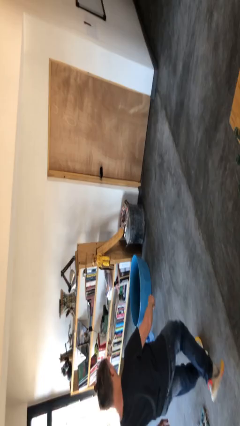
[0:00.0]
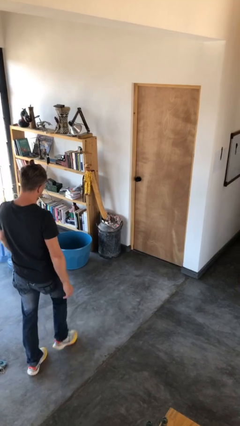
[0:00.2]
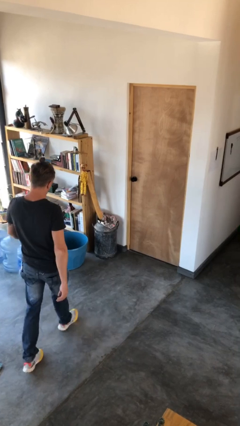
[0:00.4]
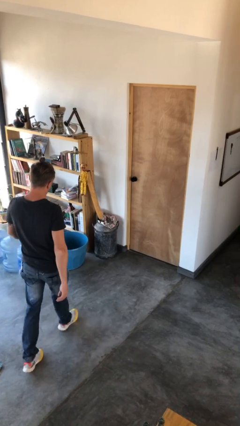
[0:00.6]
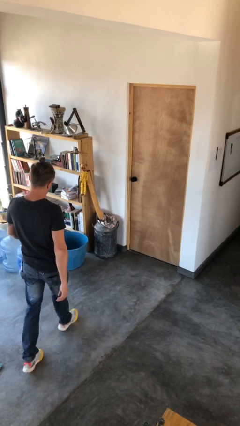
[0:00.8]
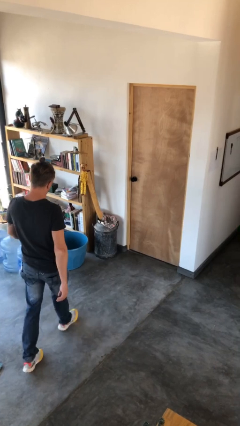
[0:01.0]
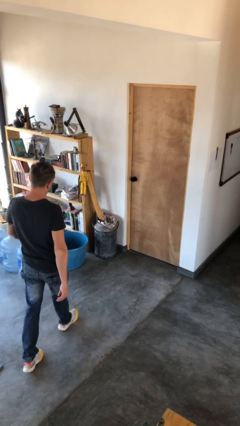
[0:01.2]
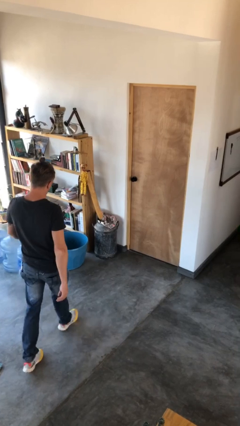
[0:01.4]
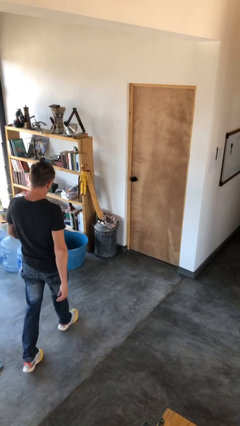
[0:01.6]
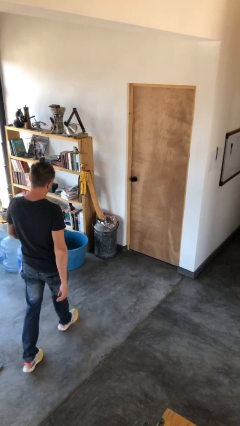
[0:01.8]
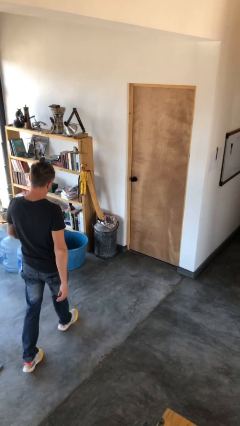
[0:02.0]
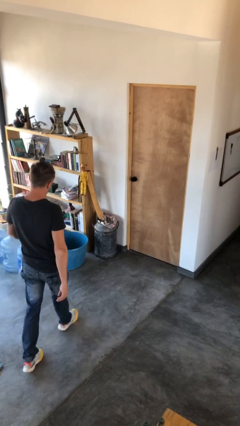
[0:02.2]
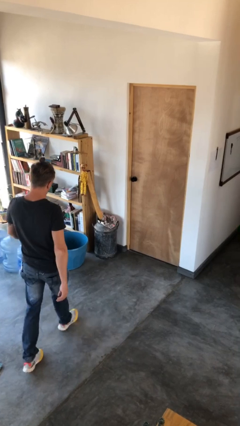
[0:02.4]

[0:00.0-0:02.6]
person closes facility door

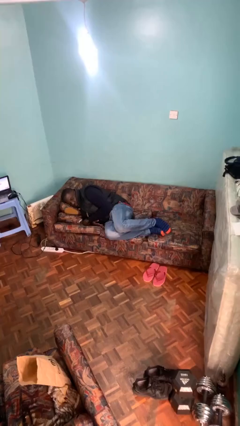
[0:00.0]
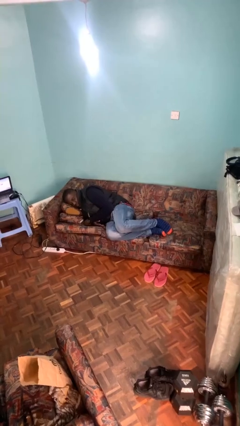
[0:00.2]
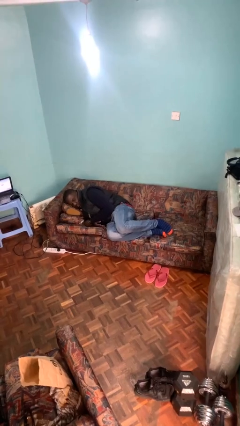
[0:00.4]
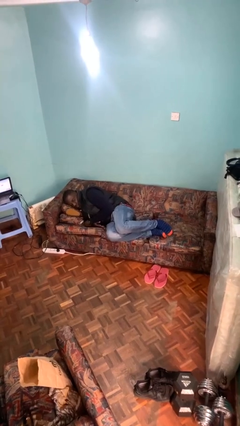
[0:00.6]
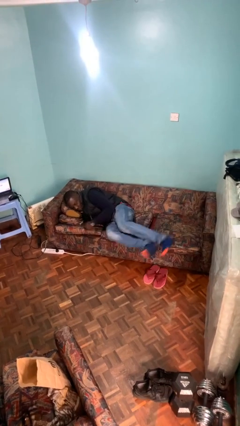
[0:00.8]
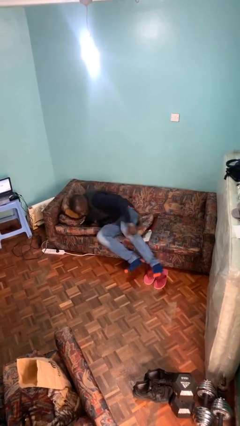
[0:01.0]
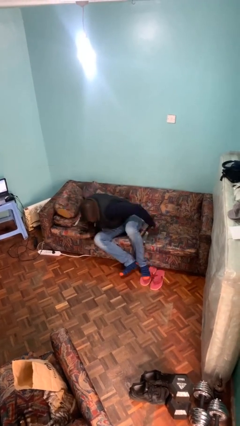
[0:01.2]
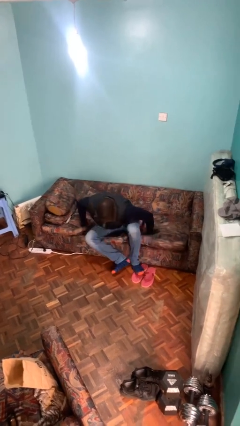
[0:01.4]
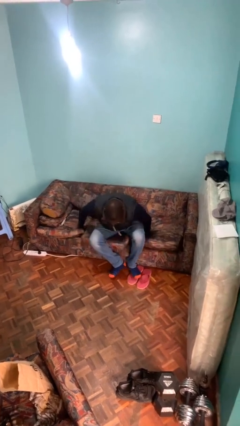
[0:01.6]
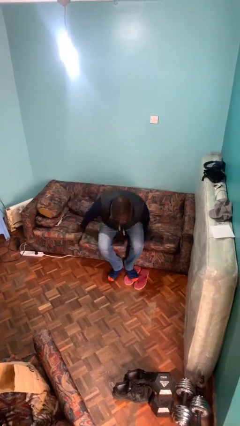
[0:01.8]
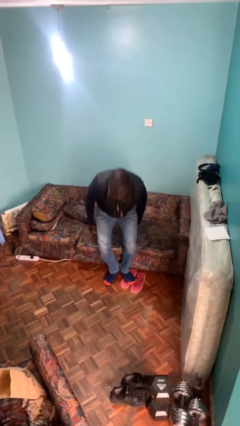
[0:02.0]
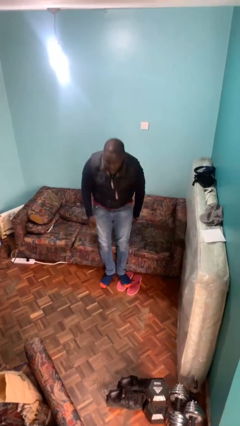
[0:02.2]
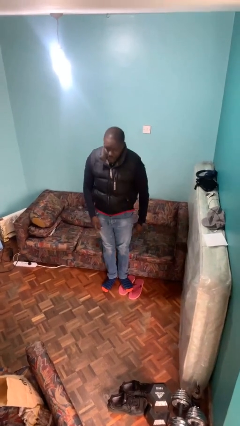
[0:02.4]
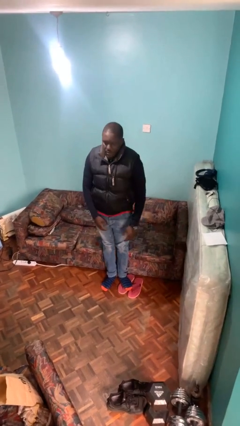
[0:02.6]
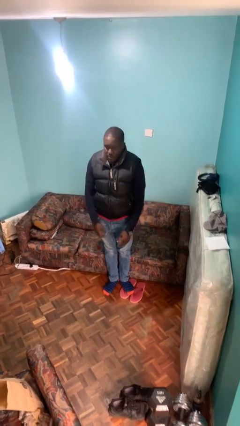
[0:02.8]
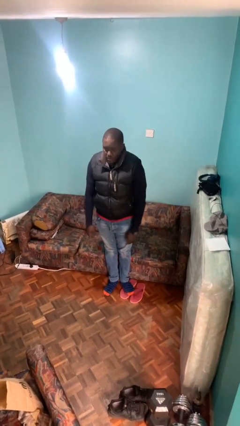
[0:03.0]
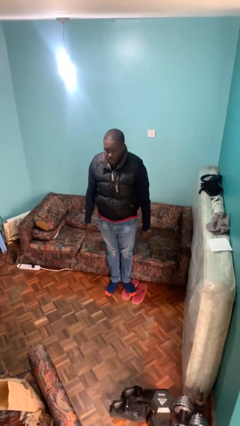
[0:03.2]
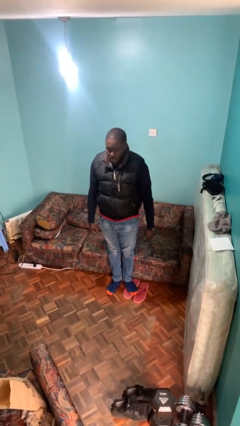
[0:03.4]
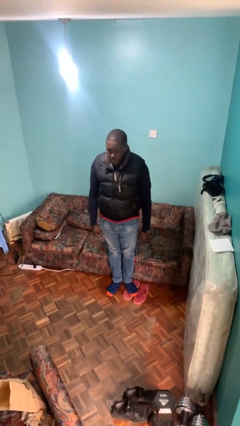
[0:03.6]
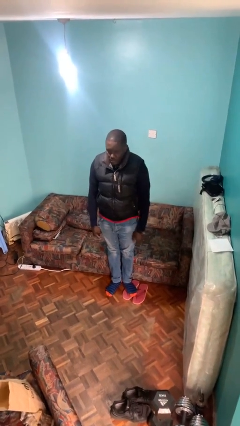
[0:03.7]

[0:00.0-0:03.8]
person stands up

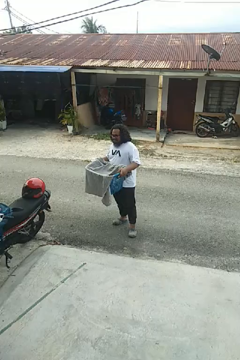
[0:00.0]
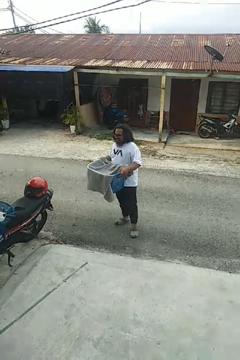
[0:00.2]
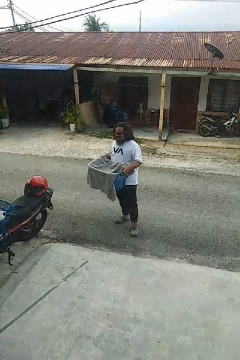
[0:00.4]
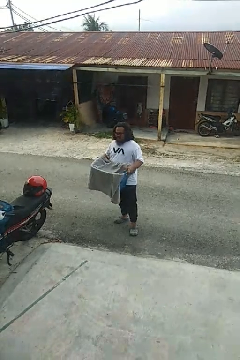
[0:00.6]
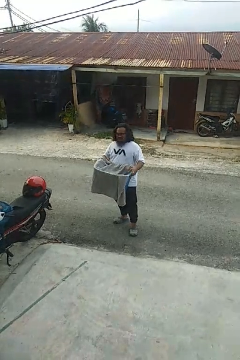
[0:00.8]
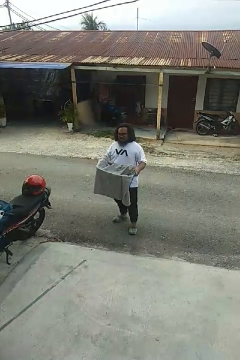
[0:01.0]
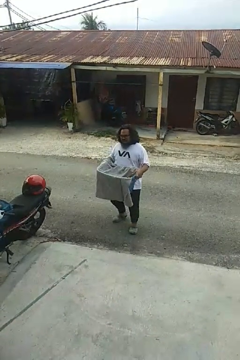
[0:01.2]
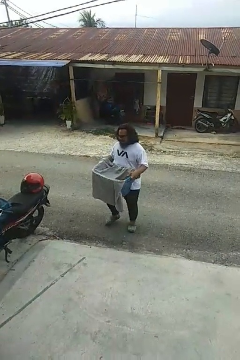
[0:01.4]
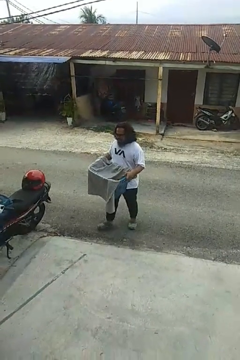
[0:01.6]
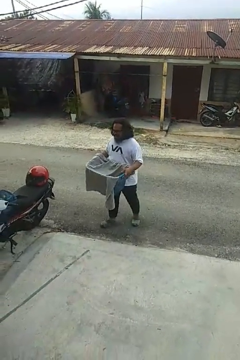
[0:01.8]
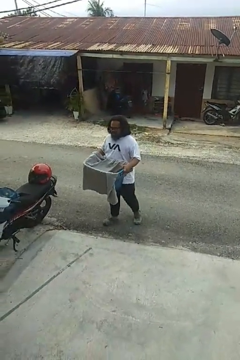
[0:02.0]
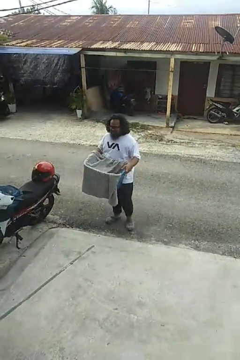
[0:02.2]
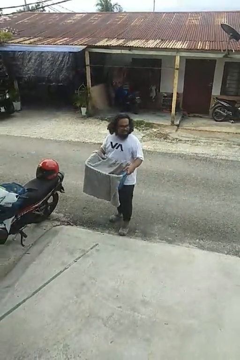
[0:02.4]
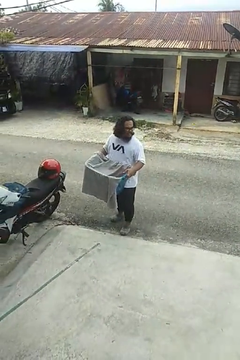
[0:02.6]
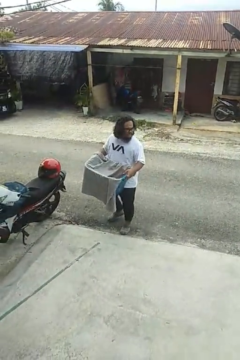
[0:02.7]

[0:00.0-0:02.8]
person carries laundry basket

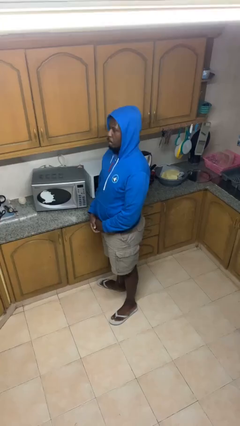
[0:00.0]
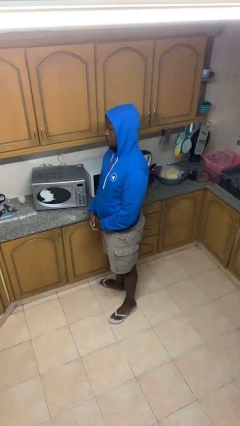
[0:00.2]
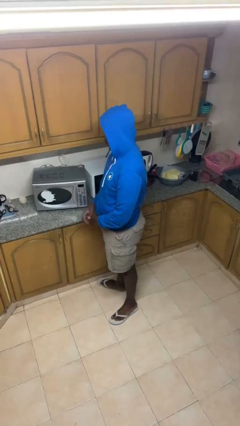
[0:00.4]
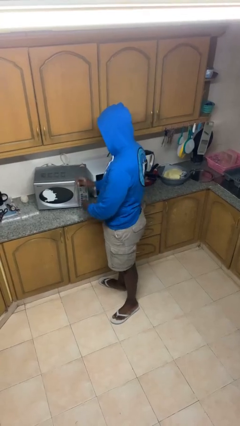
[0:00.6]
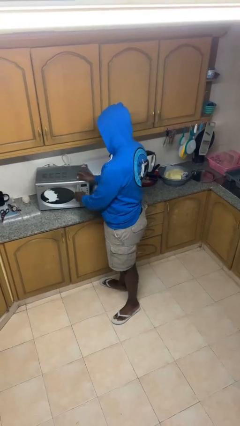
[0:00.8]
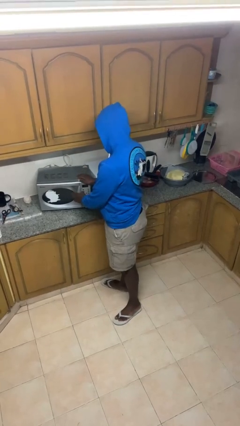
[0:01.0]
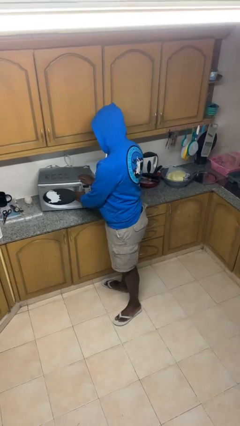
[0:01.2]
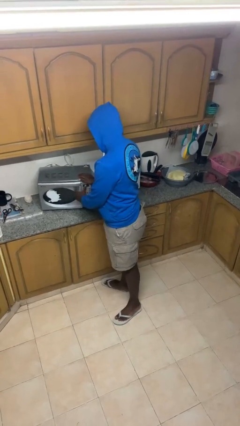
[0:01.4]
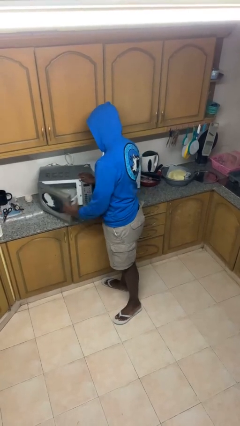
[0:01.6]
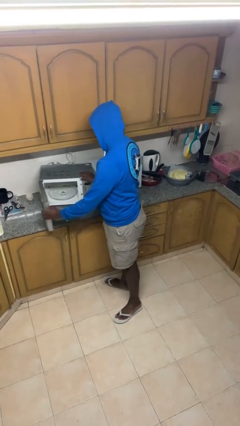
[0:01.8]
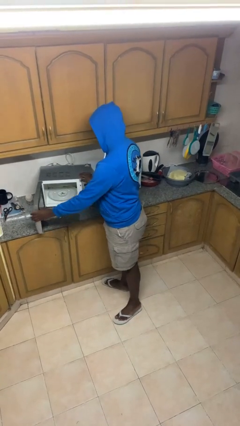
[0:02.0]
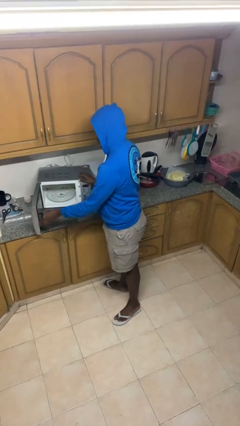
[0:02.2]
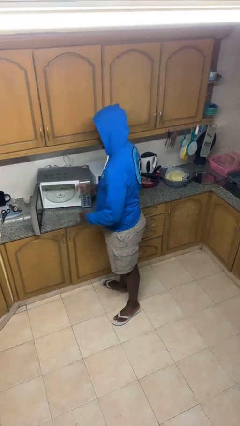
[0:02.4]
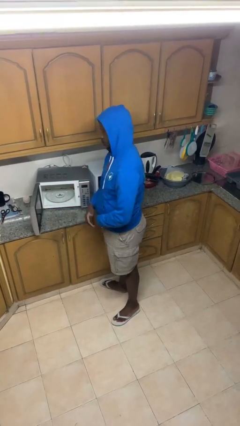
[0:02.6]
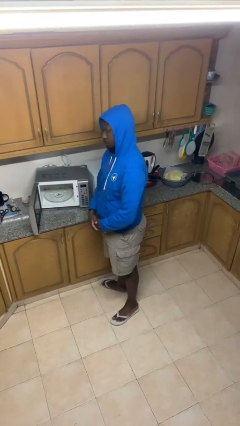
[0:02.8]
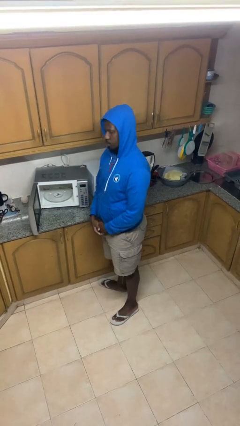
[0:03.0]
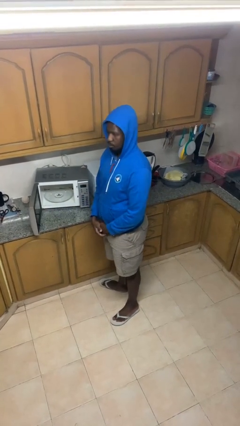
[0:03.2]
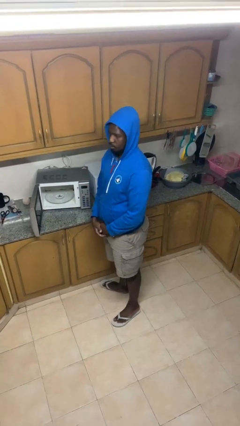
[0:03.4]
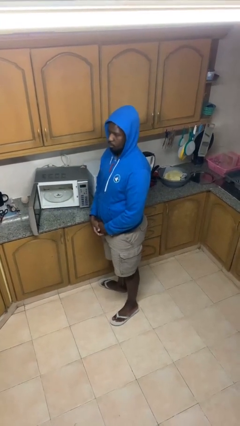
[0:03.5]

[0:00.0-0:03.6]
person opens microwave

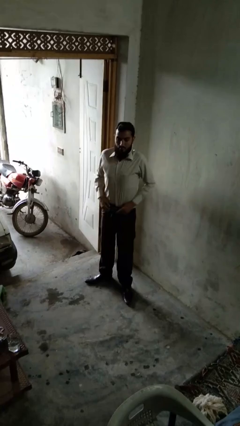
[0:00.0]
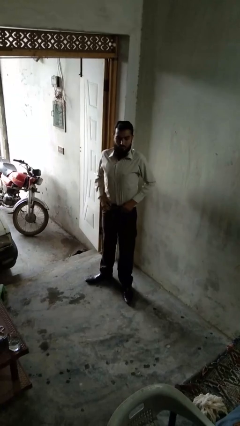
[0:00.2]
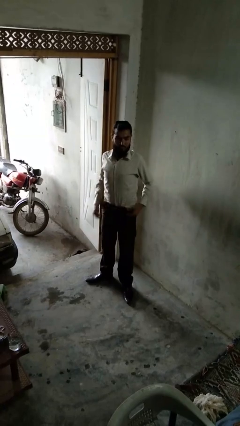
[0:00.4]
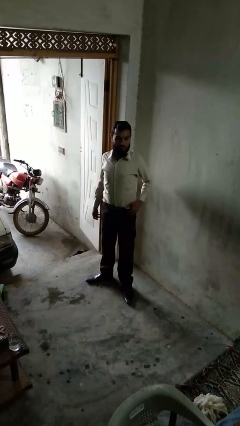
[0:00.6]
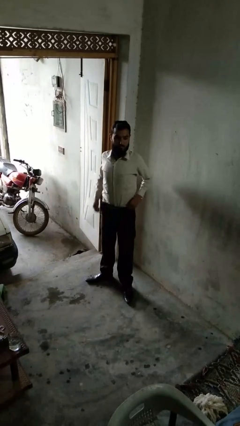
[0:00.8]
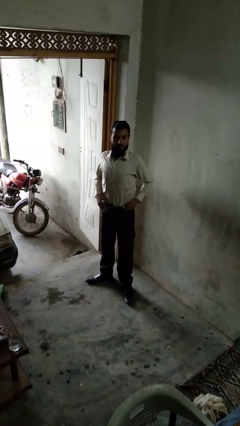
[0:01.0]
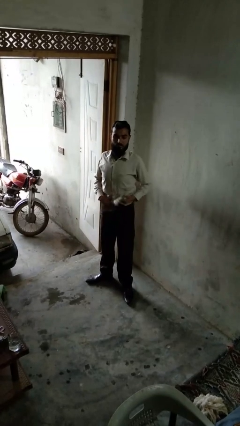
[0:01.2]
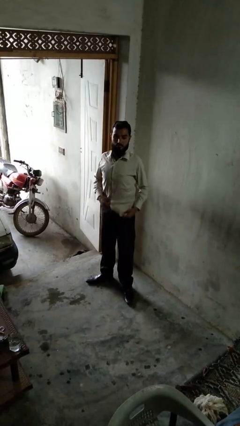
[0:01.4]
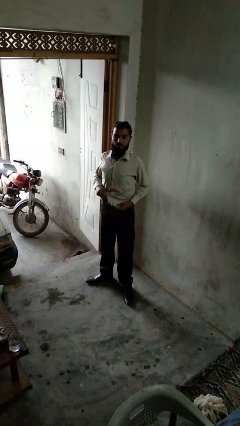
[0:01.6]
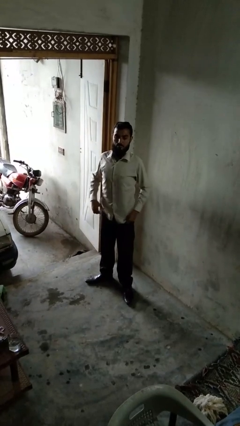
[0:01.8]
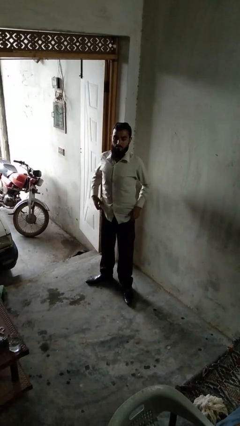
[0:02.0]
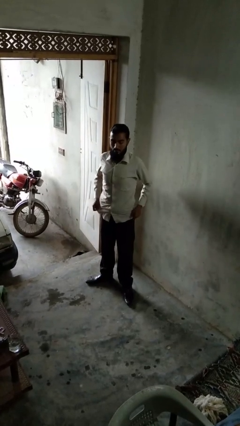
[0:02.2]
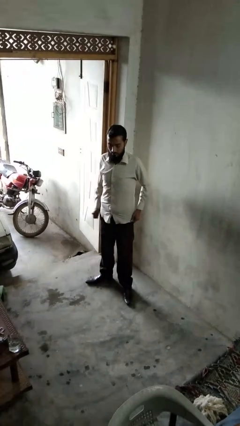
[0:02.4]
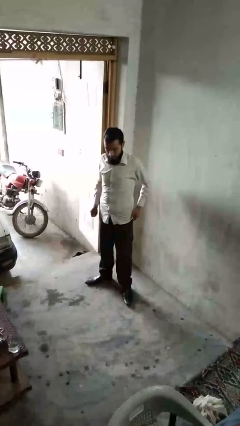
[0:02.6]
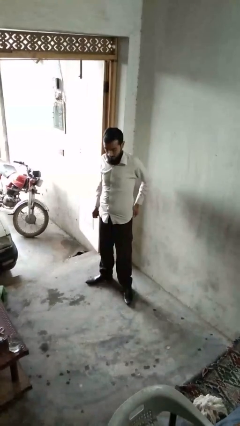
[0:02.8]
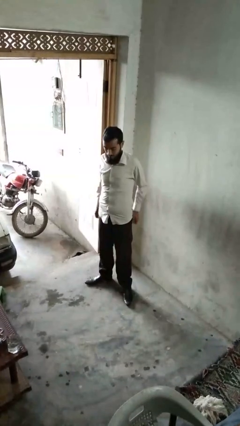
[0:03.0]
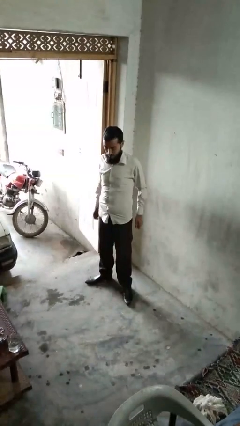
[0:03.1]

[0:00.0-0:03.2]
person untucks shirt

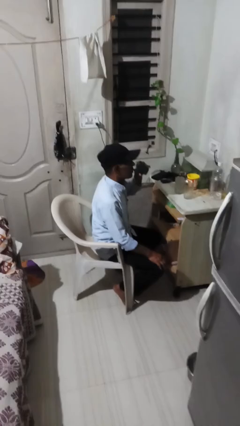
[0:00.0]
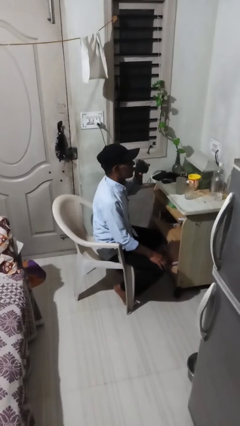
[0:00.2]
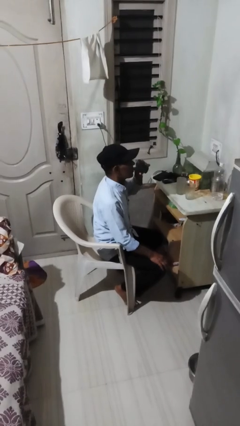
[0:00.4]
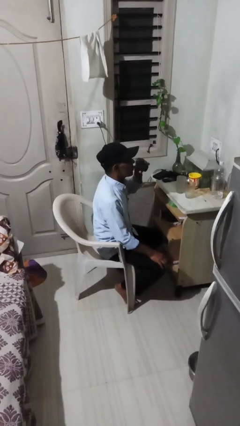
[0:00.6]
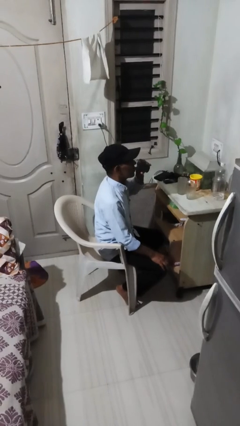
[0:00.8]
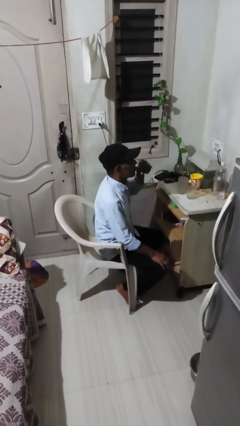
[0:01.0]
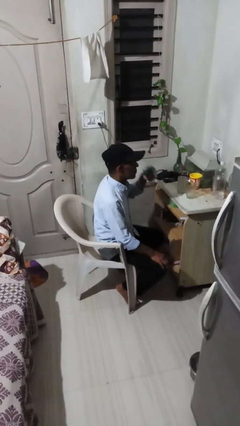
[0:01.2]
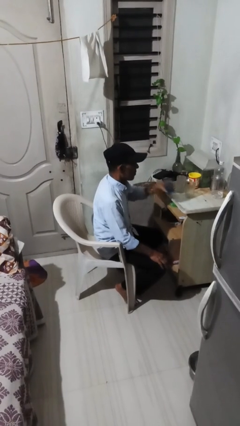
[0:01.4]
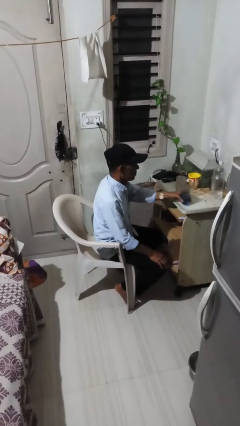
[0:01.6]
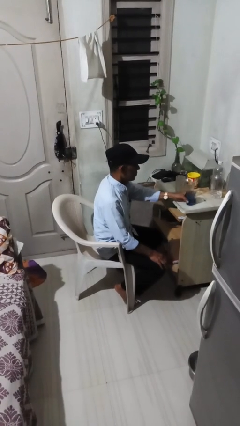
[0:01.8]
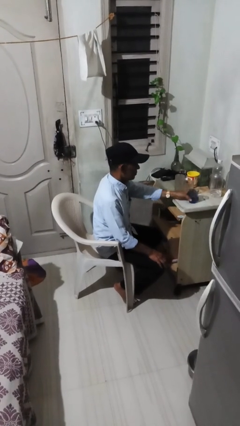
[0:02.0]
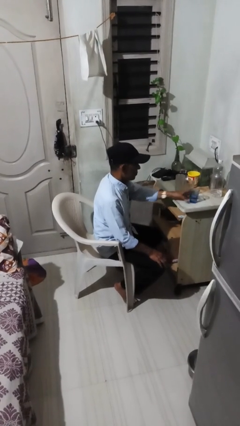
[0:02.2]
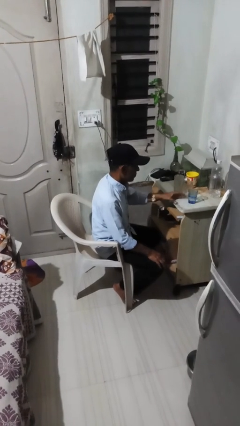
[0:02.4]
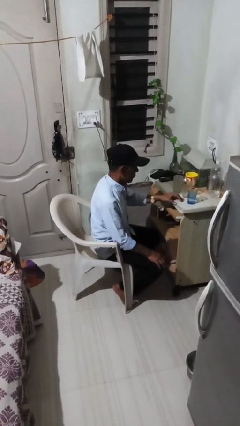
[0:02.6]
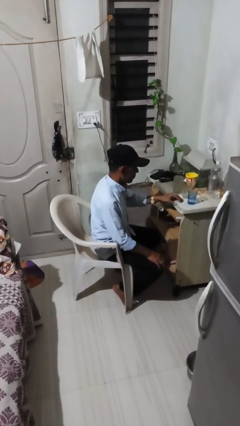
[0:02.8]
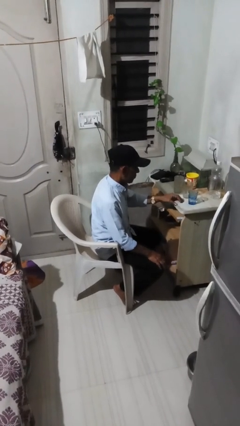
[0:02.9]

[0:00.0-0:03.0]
person puts down object on table
